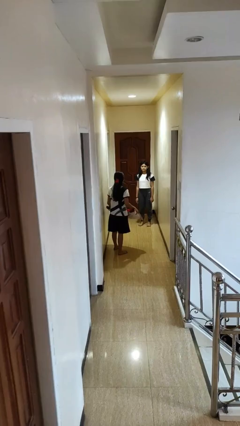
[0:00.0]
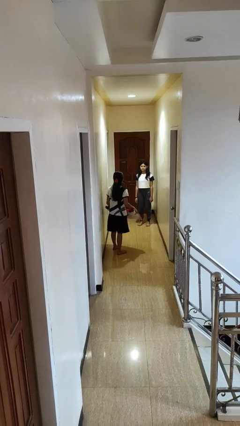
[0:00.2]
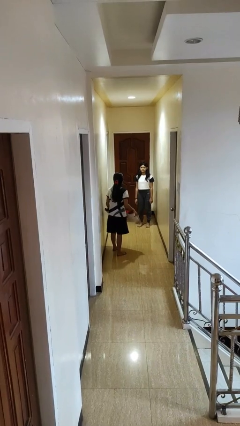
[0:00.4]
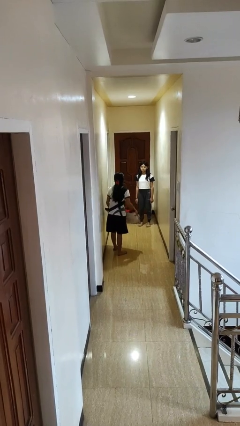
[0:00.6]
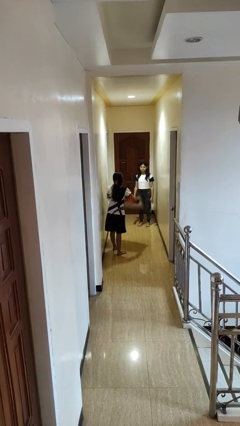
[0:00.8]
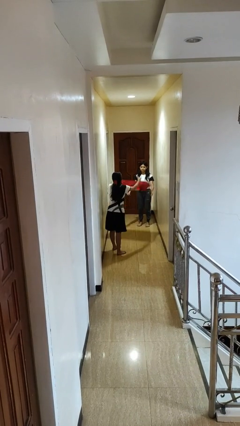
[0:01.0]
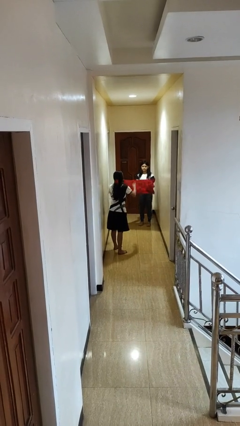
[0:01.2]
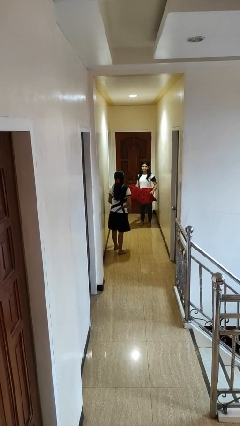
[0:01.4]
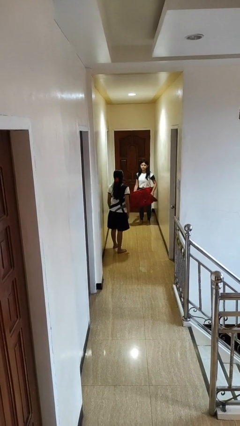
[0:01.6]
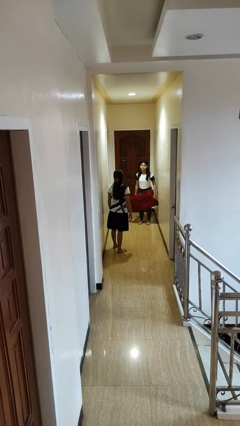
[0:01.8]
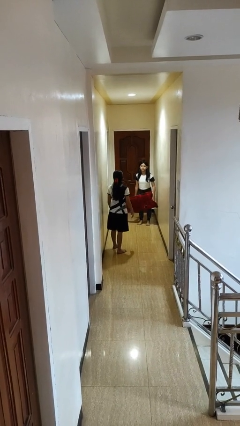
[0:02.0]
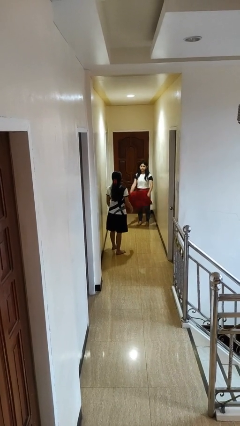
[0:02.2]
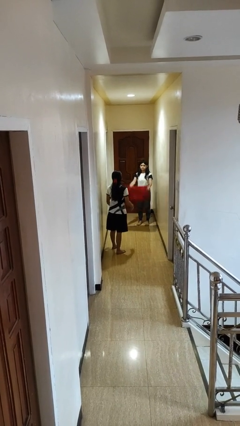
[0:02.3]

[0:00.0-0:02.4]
person throws object to person

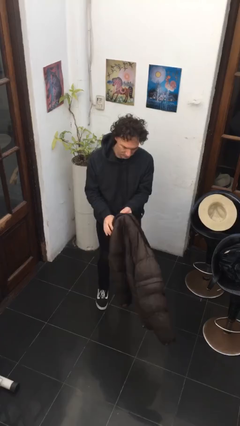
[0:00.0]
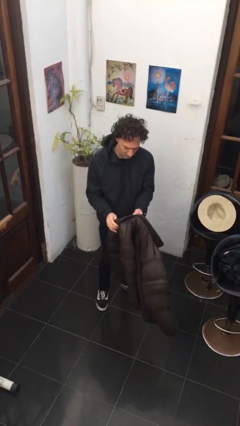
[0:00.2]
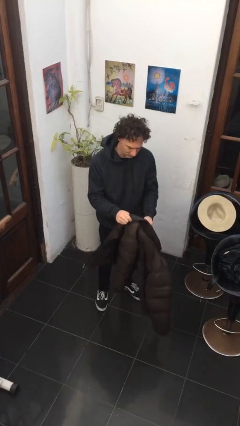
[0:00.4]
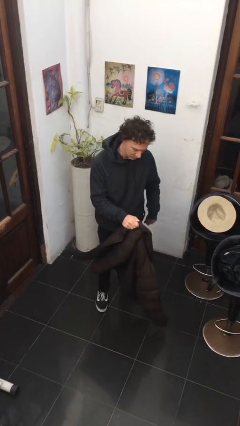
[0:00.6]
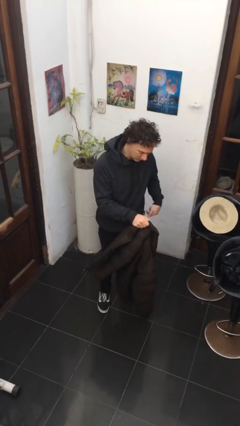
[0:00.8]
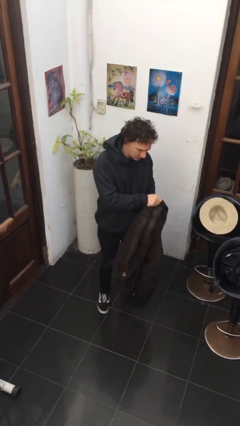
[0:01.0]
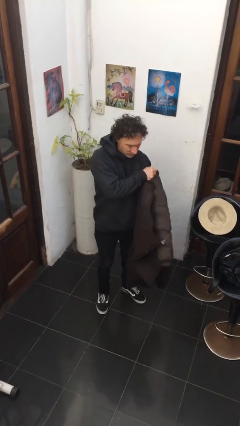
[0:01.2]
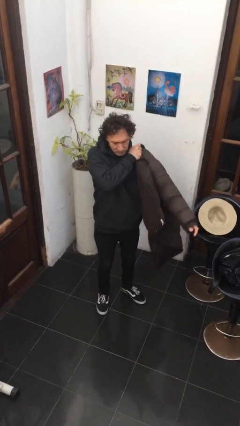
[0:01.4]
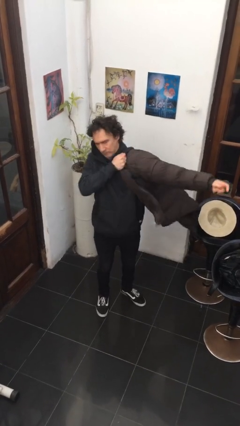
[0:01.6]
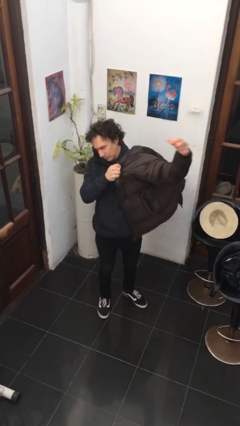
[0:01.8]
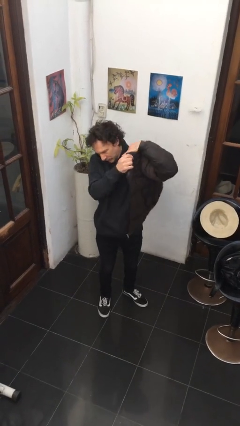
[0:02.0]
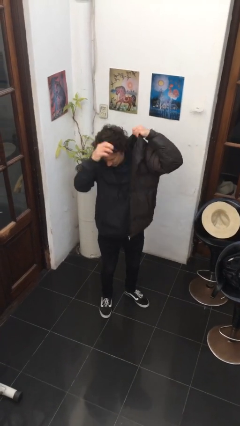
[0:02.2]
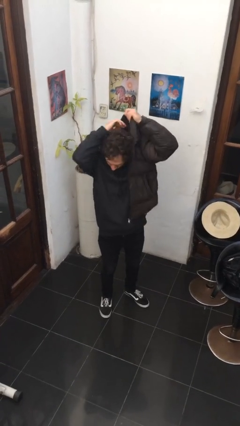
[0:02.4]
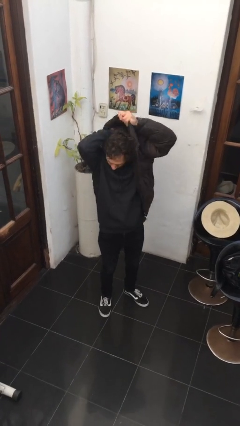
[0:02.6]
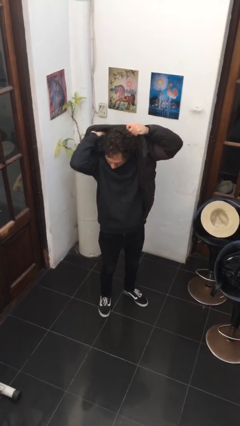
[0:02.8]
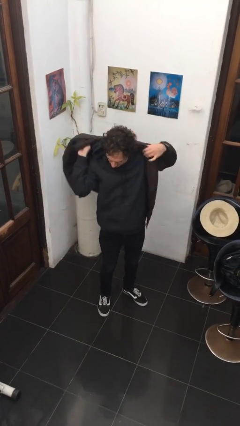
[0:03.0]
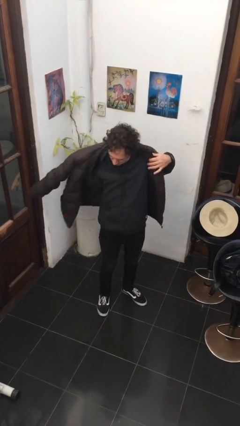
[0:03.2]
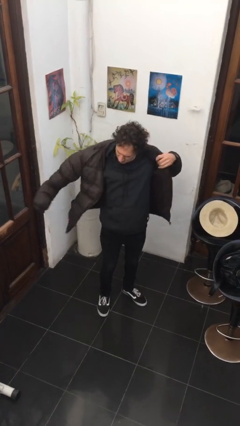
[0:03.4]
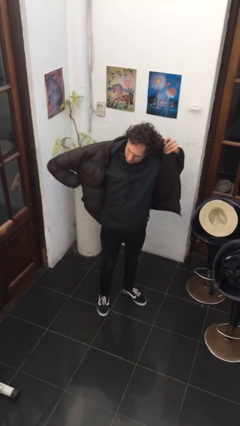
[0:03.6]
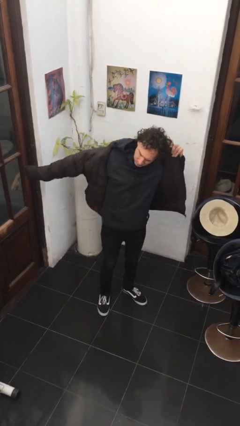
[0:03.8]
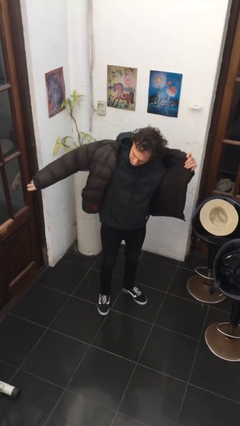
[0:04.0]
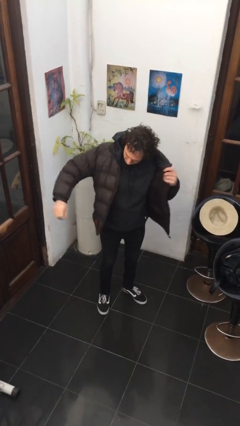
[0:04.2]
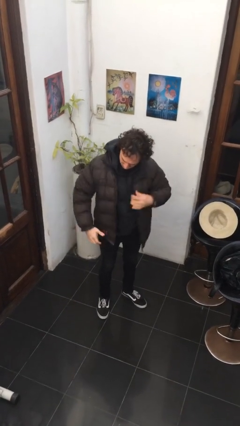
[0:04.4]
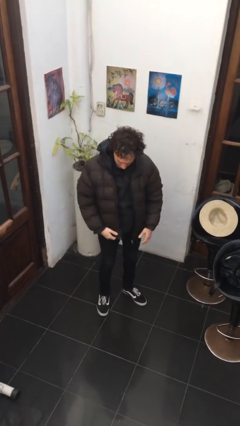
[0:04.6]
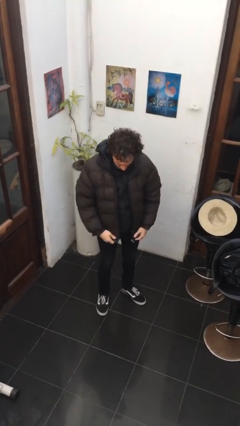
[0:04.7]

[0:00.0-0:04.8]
person puts on jacket

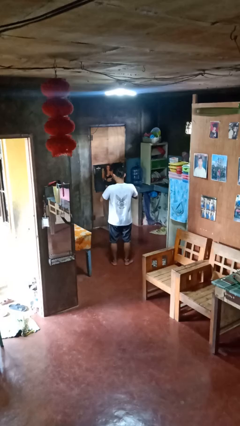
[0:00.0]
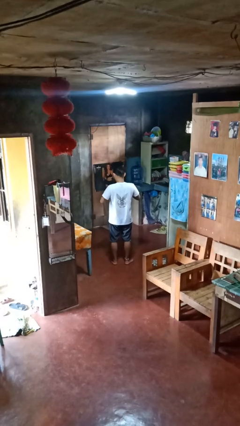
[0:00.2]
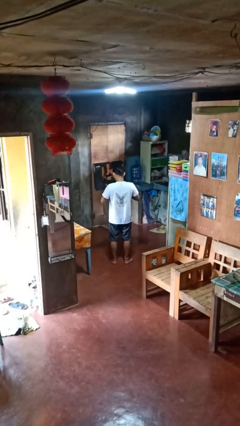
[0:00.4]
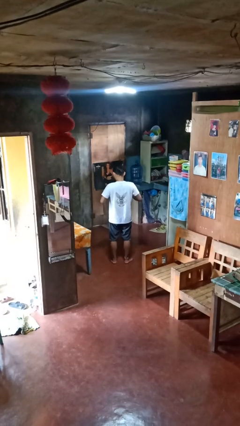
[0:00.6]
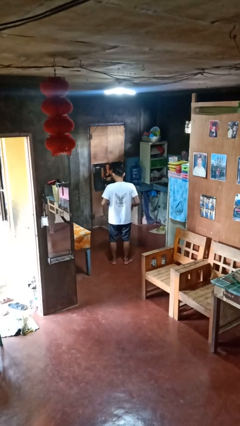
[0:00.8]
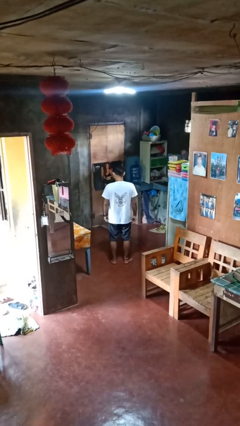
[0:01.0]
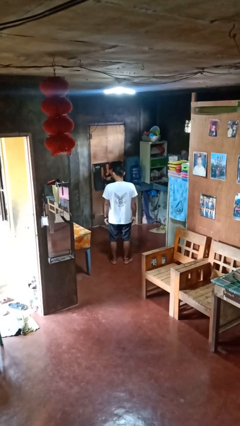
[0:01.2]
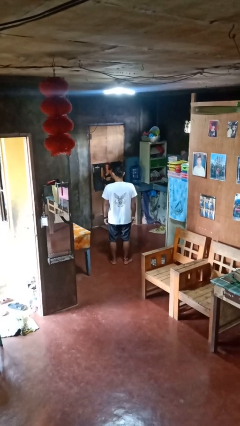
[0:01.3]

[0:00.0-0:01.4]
person buttons shirt

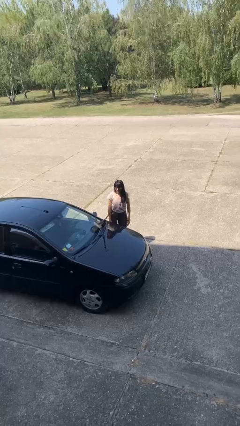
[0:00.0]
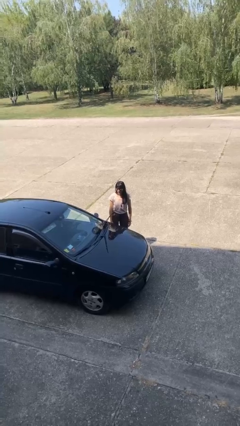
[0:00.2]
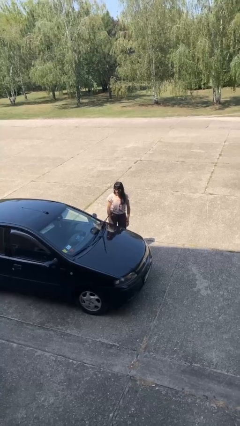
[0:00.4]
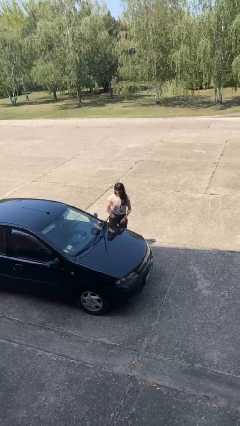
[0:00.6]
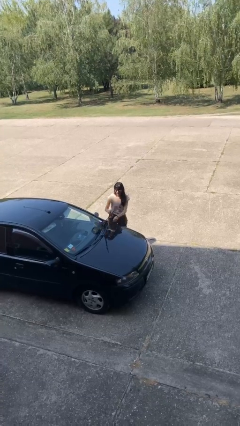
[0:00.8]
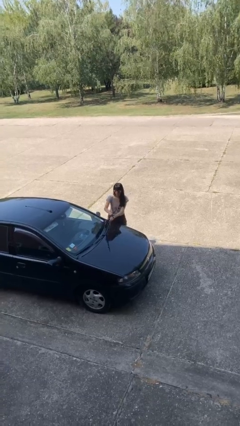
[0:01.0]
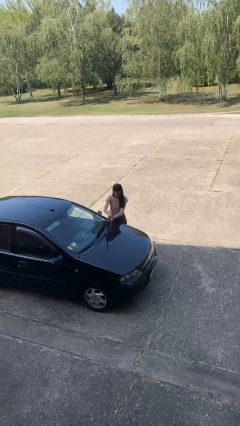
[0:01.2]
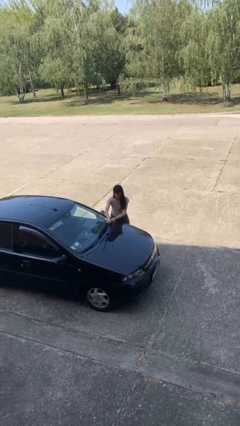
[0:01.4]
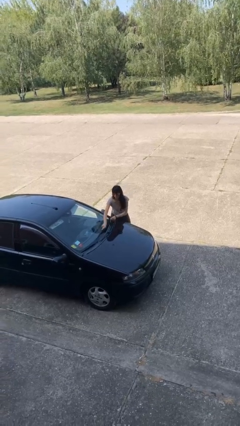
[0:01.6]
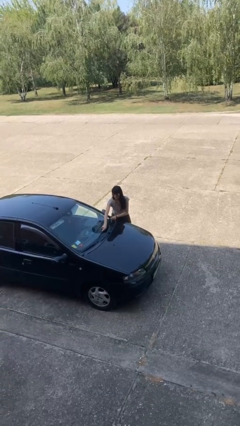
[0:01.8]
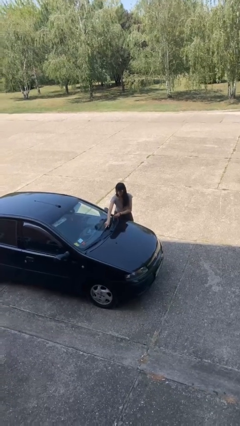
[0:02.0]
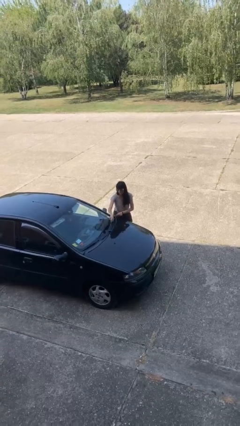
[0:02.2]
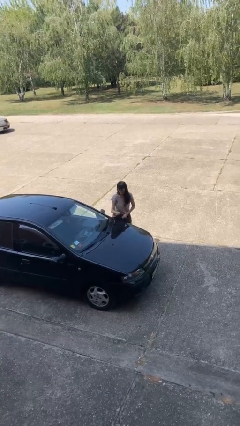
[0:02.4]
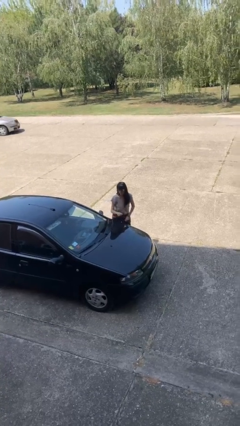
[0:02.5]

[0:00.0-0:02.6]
person flips down car wipers

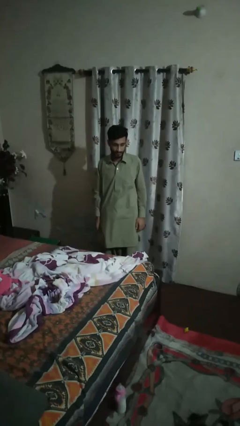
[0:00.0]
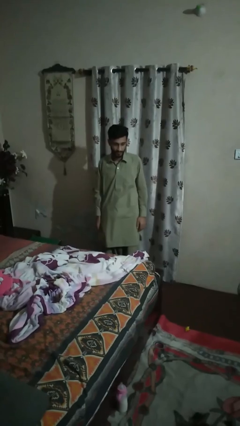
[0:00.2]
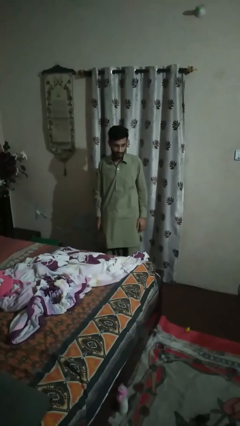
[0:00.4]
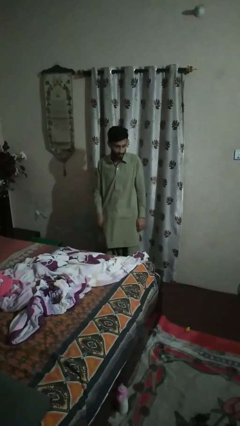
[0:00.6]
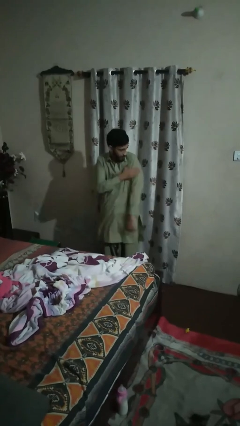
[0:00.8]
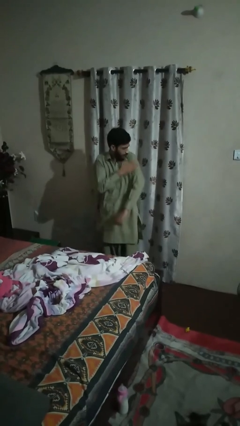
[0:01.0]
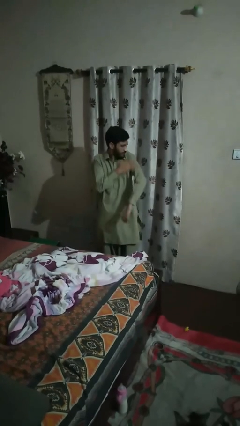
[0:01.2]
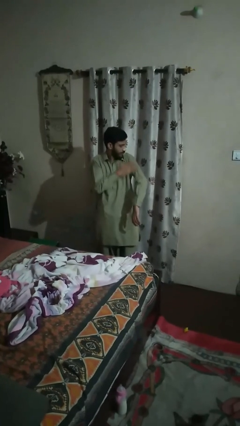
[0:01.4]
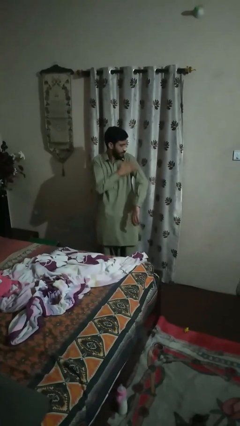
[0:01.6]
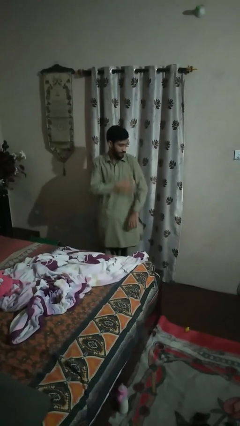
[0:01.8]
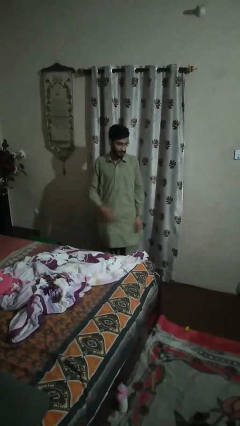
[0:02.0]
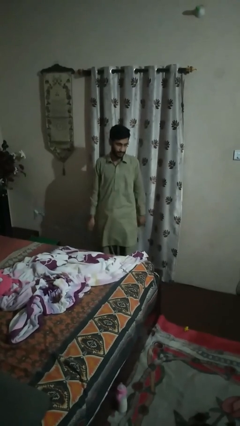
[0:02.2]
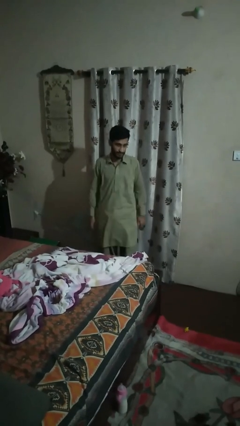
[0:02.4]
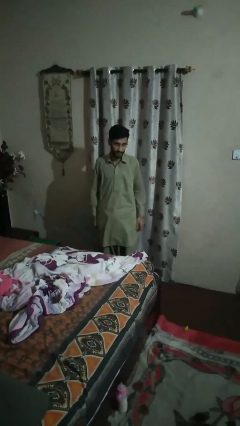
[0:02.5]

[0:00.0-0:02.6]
person swats bug

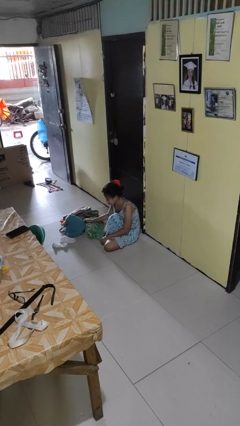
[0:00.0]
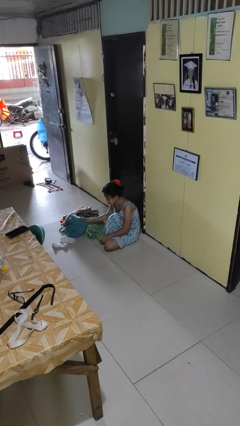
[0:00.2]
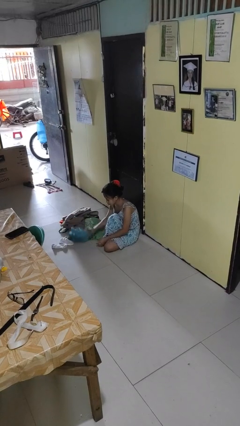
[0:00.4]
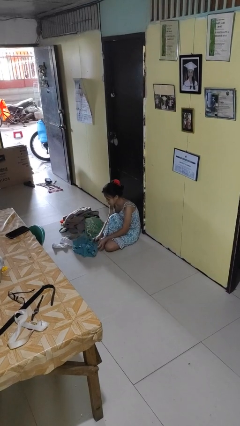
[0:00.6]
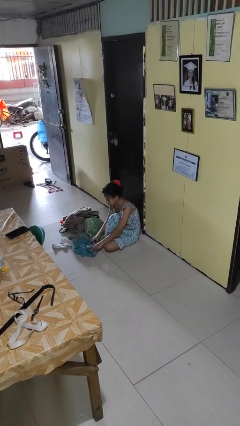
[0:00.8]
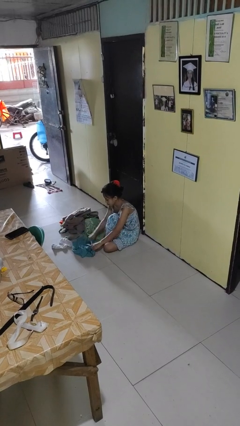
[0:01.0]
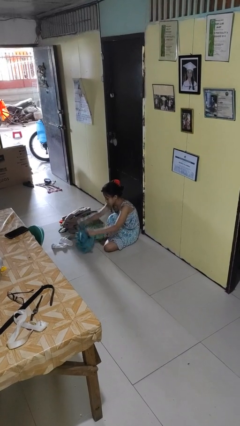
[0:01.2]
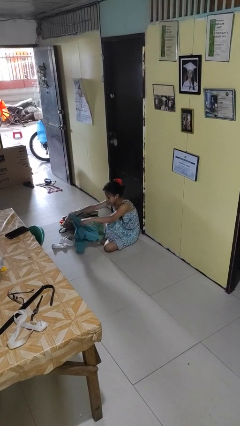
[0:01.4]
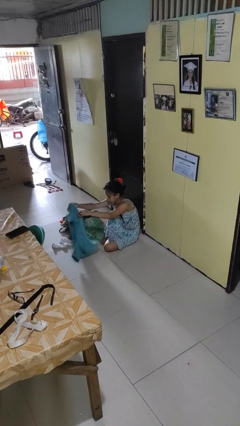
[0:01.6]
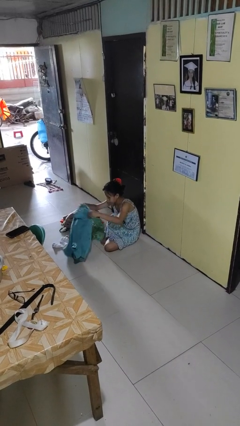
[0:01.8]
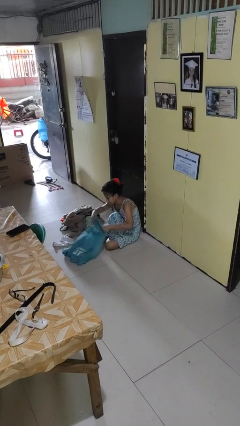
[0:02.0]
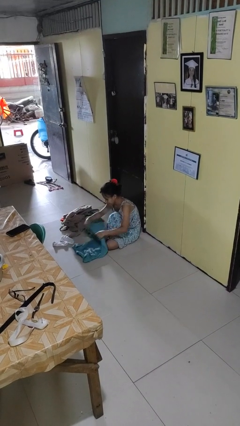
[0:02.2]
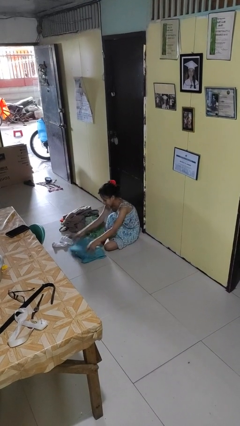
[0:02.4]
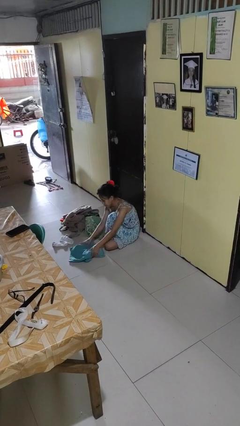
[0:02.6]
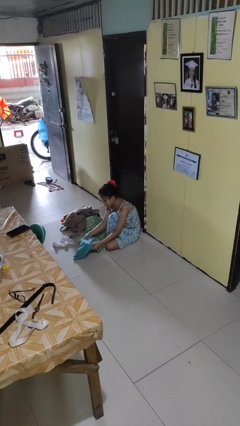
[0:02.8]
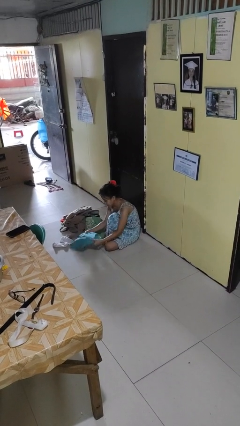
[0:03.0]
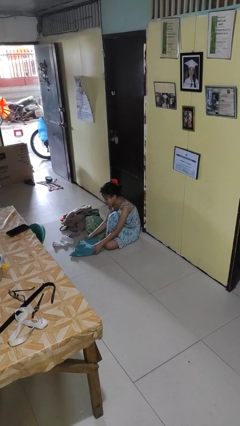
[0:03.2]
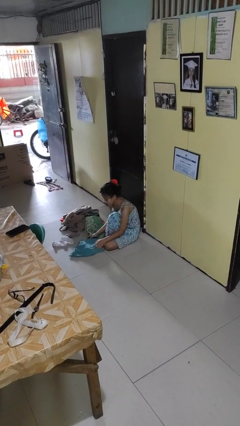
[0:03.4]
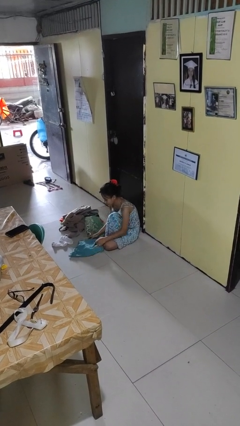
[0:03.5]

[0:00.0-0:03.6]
person folds shirt
